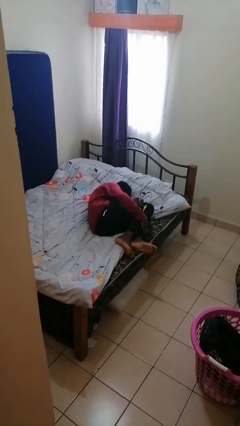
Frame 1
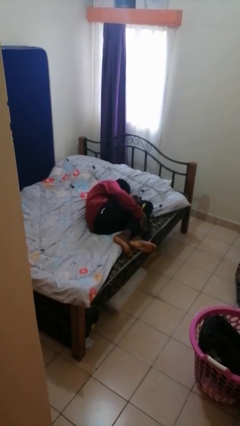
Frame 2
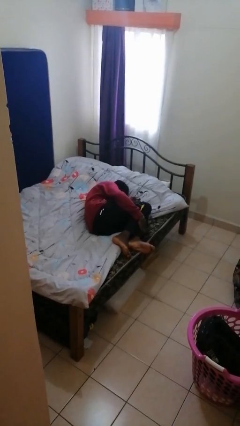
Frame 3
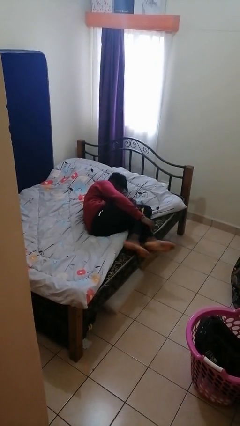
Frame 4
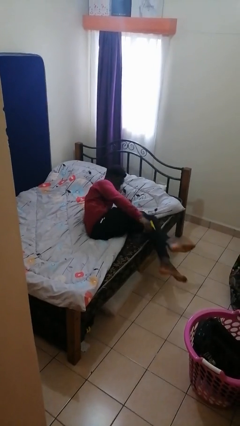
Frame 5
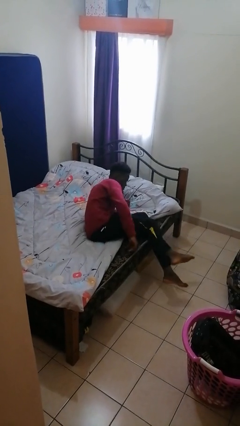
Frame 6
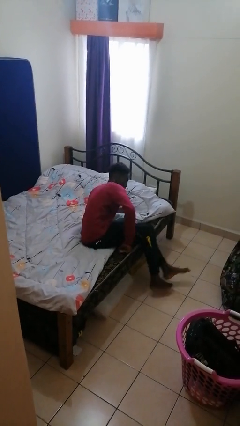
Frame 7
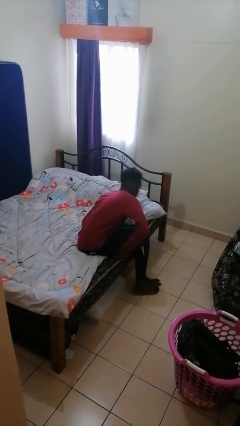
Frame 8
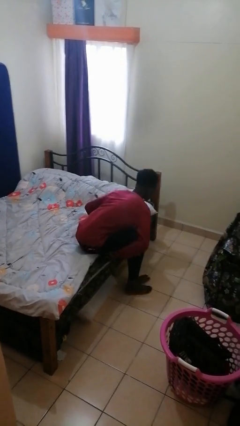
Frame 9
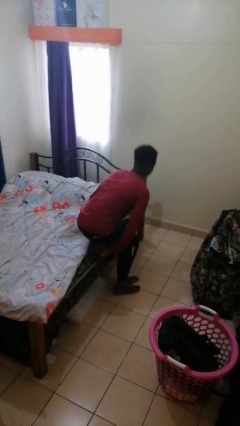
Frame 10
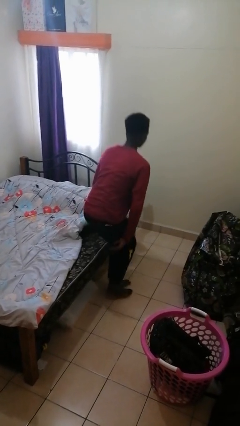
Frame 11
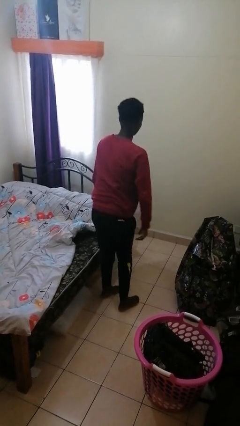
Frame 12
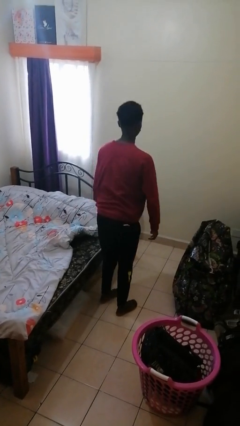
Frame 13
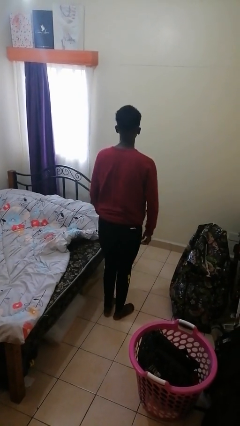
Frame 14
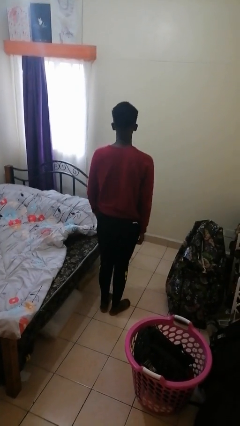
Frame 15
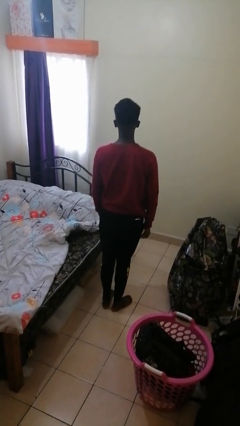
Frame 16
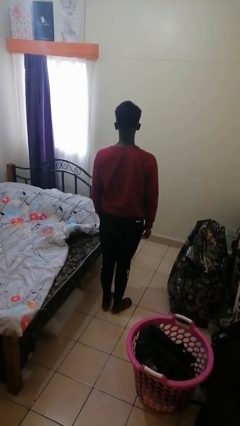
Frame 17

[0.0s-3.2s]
person stands up

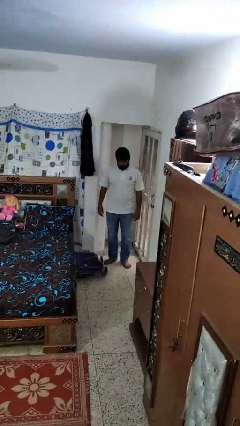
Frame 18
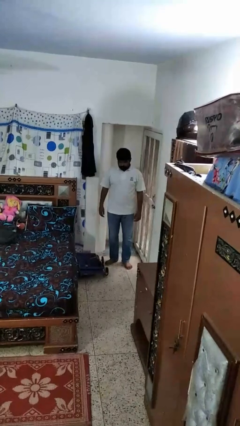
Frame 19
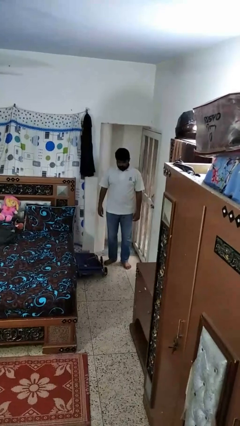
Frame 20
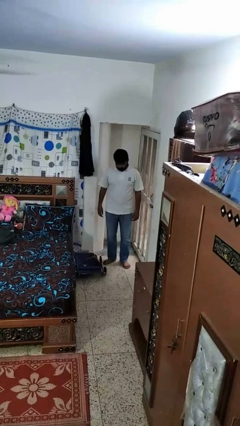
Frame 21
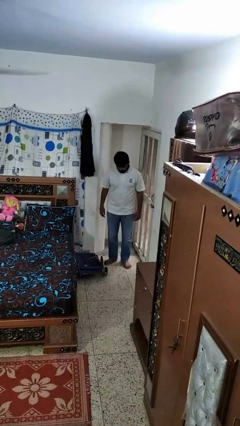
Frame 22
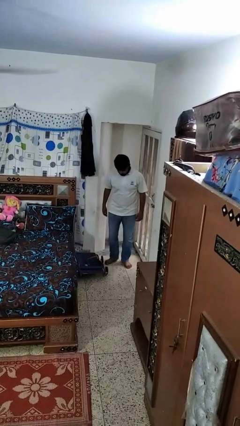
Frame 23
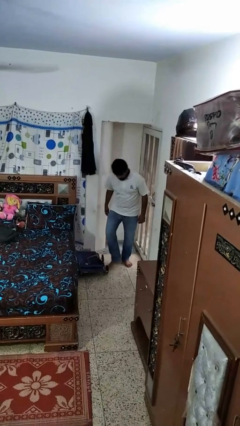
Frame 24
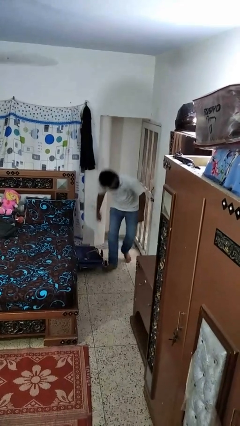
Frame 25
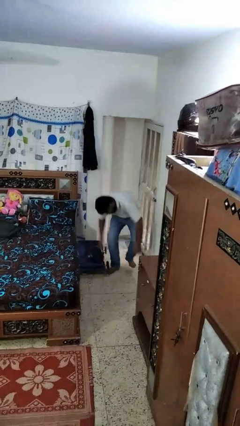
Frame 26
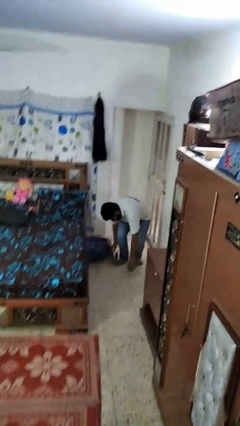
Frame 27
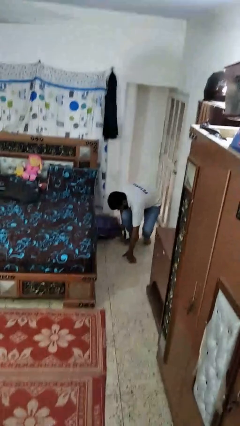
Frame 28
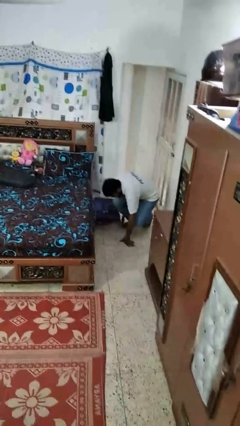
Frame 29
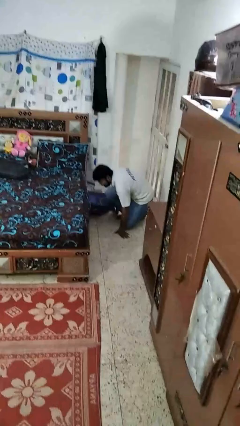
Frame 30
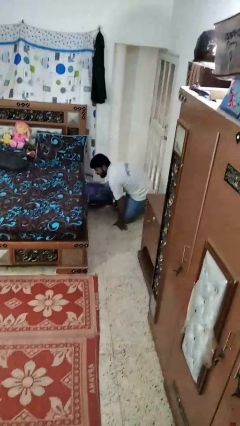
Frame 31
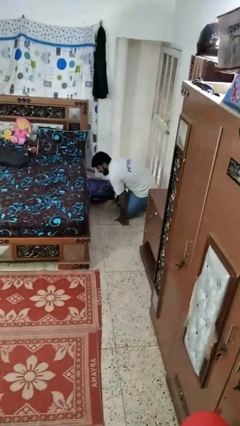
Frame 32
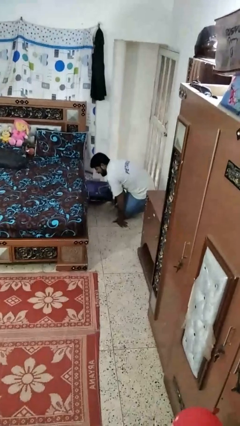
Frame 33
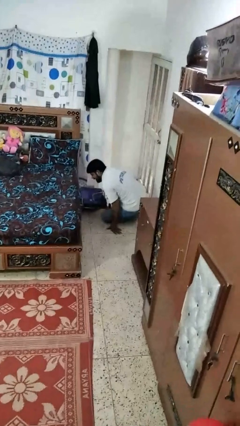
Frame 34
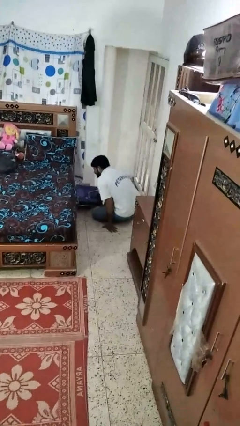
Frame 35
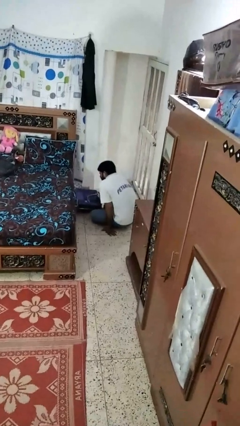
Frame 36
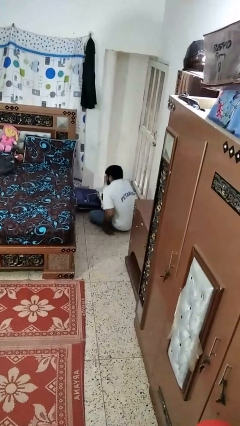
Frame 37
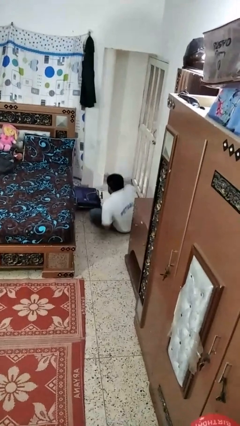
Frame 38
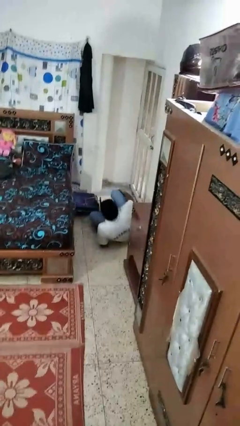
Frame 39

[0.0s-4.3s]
person trips on object on floor

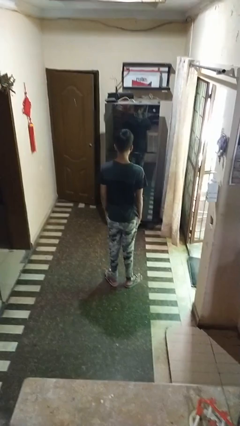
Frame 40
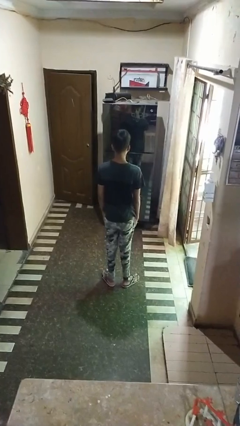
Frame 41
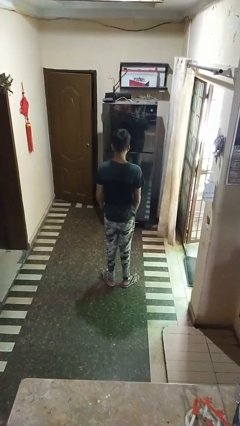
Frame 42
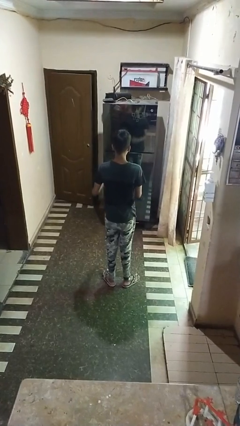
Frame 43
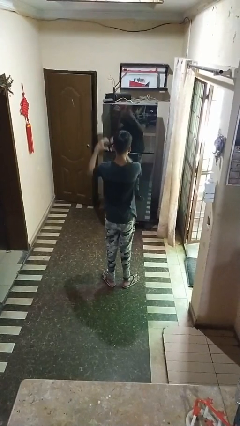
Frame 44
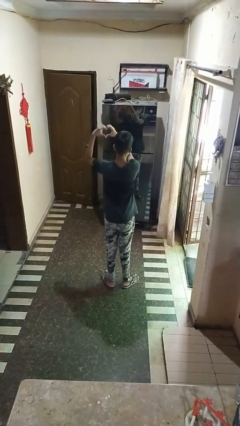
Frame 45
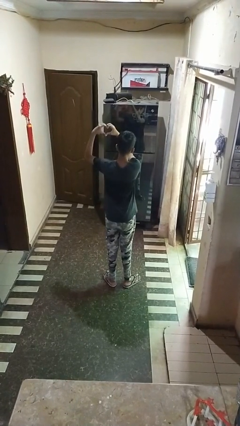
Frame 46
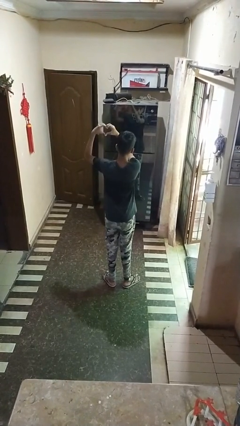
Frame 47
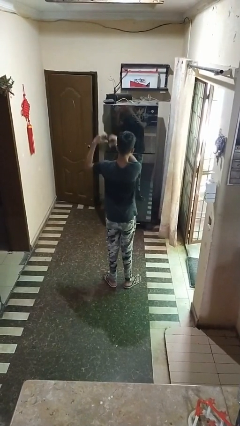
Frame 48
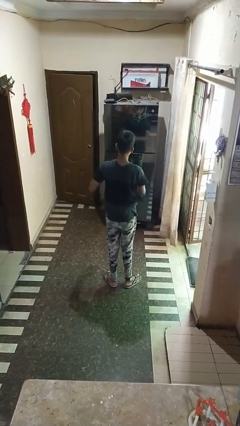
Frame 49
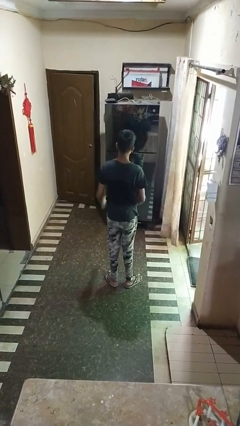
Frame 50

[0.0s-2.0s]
person gestures heart

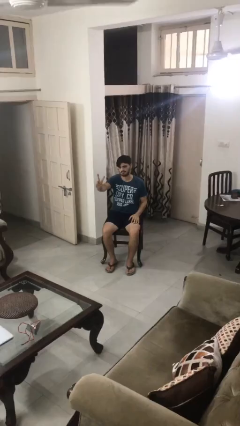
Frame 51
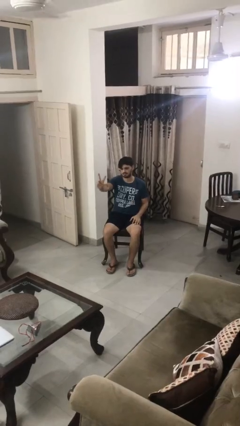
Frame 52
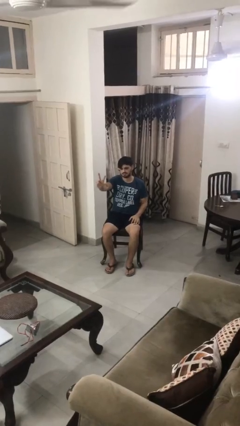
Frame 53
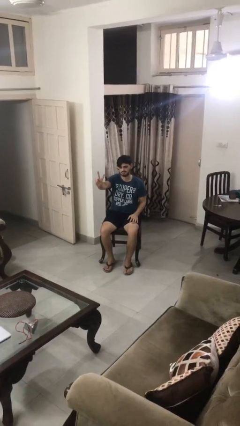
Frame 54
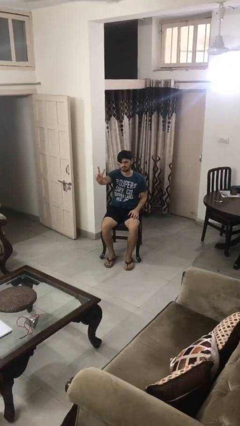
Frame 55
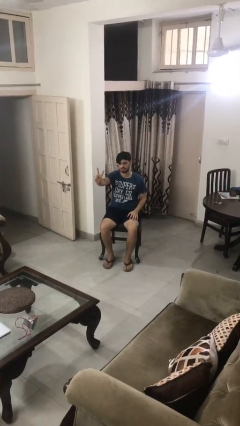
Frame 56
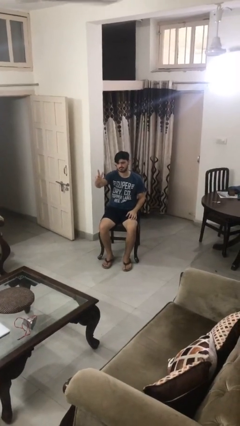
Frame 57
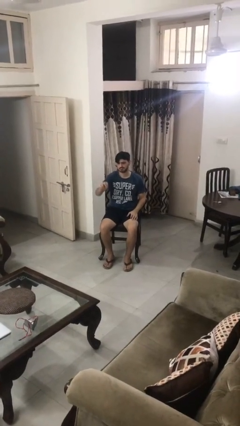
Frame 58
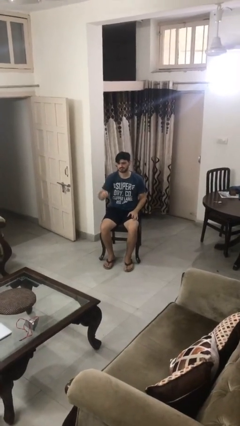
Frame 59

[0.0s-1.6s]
person gestures peace

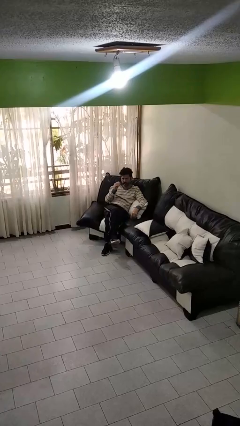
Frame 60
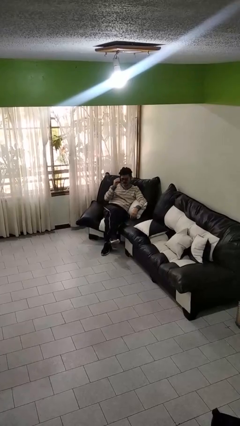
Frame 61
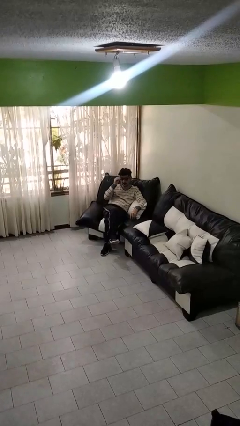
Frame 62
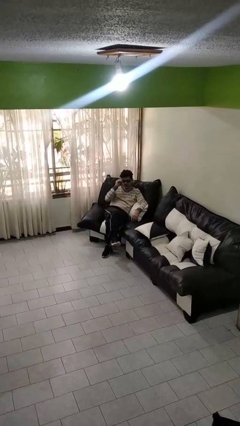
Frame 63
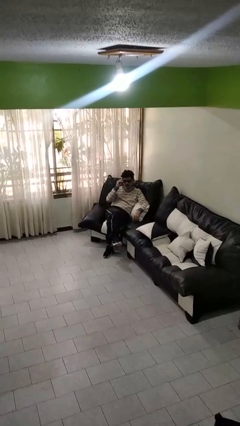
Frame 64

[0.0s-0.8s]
person puts on sunglasses

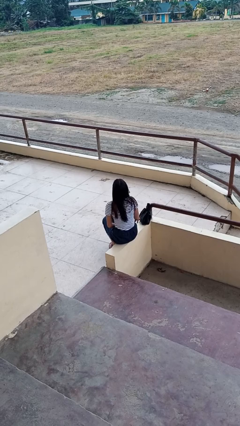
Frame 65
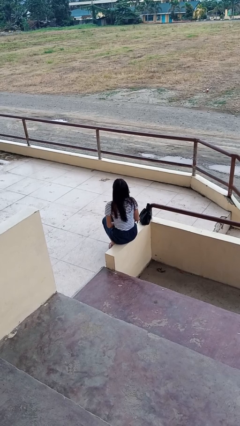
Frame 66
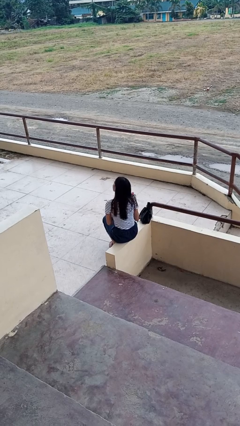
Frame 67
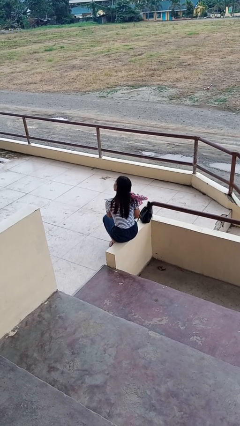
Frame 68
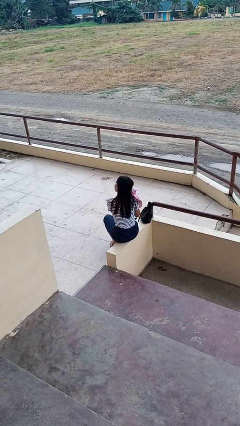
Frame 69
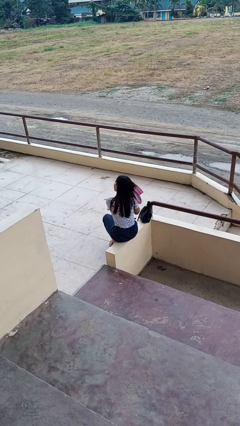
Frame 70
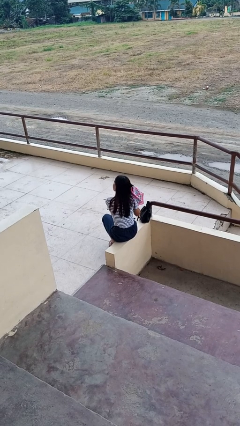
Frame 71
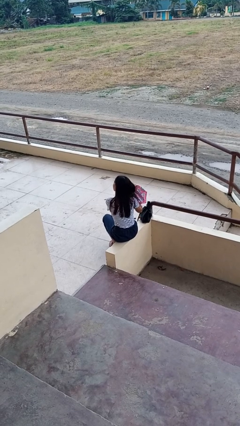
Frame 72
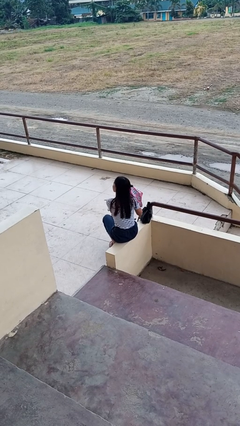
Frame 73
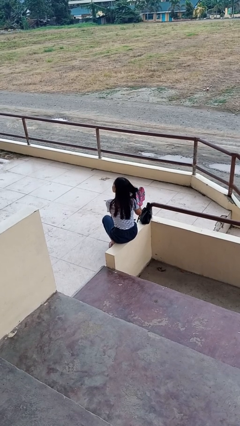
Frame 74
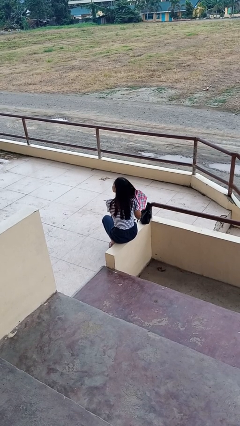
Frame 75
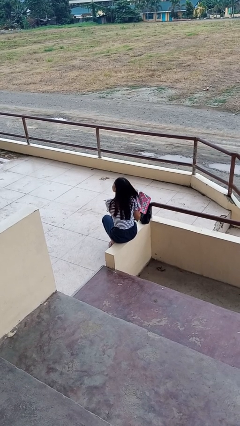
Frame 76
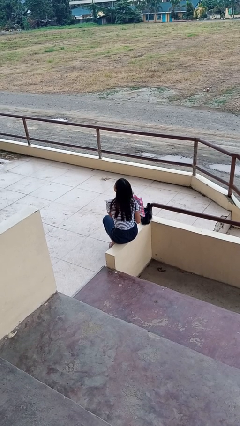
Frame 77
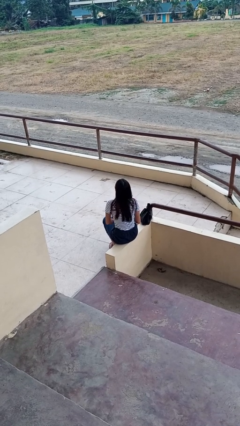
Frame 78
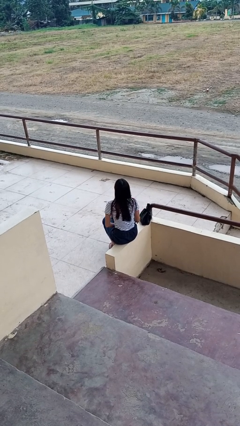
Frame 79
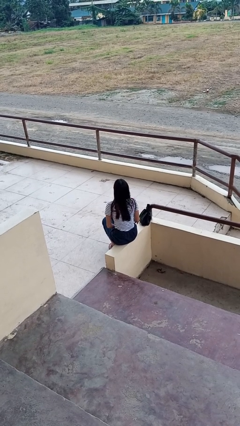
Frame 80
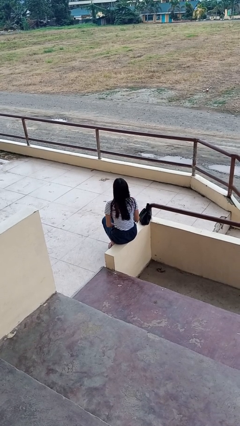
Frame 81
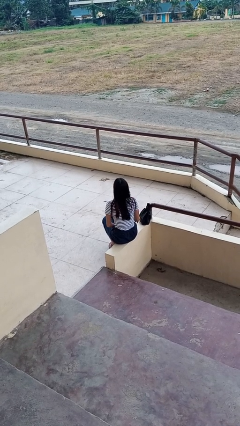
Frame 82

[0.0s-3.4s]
person dries hair with towel

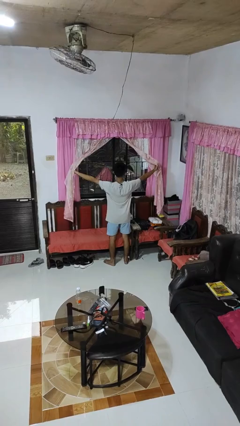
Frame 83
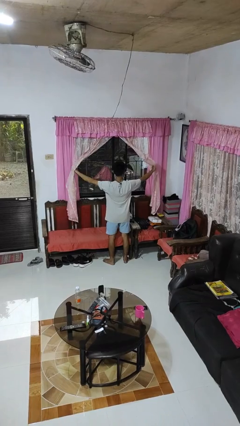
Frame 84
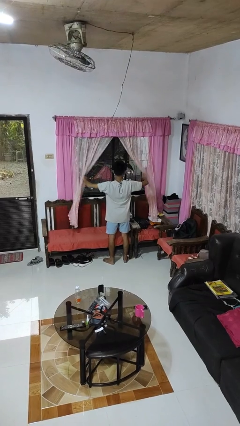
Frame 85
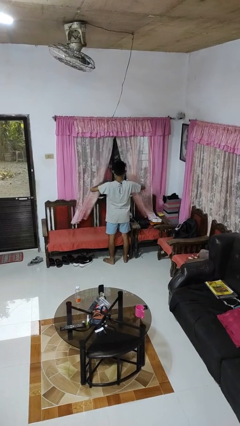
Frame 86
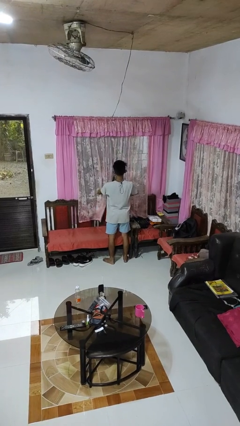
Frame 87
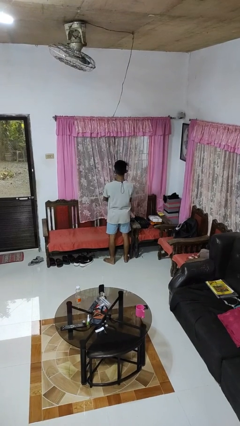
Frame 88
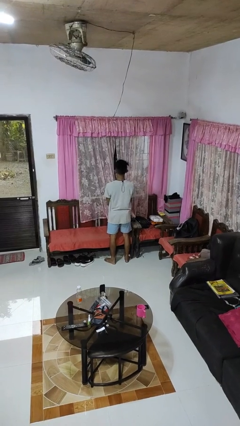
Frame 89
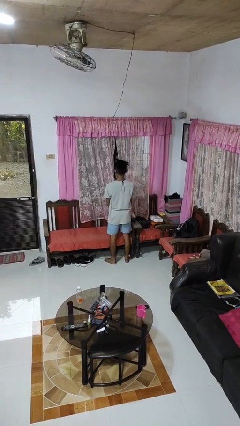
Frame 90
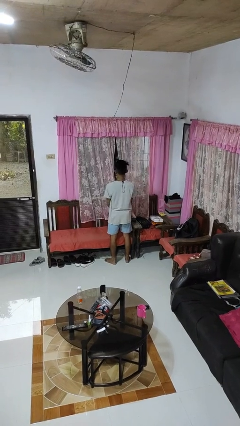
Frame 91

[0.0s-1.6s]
person closes curtains

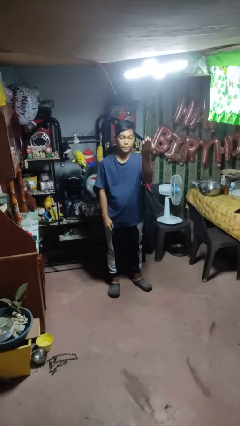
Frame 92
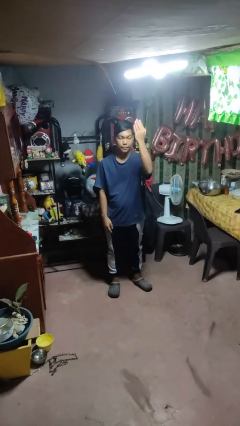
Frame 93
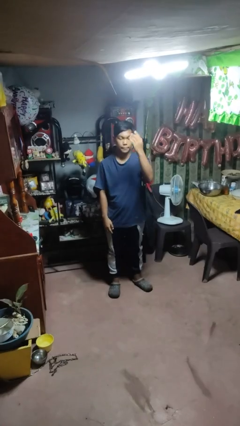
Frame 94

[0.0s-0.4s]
person gestures swipe up
